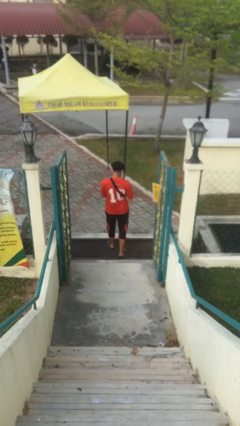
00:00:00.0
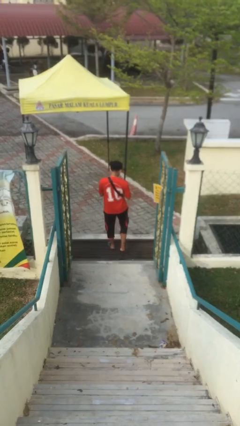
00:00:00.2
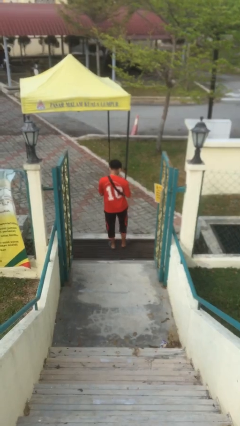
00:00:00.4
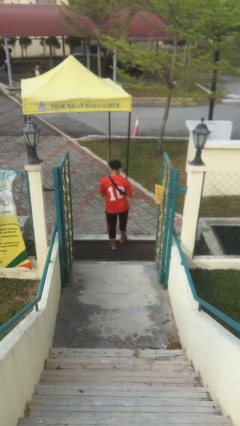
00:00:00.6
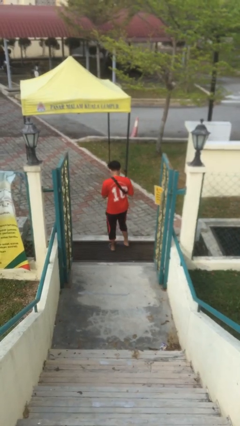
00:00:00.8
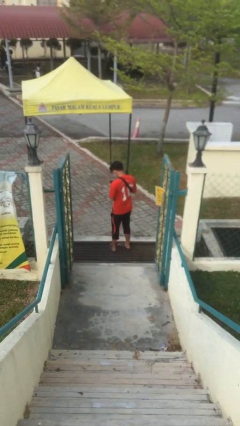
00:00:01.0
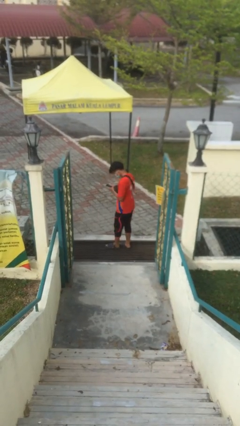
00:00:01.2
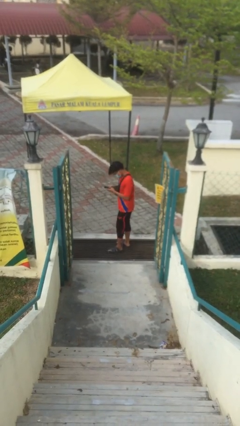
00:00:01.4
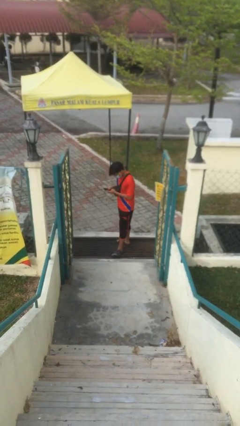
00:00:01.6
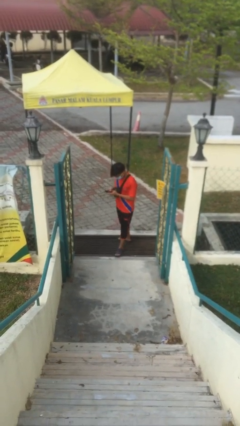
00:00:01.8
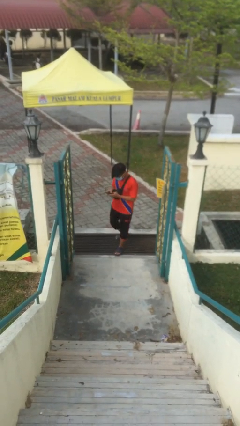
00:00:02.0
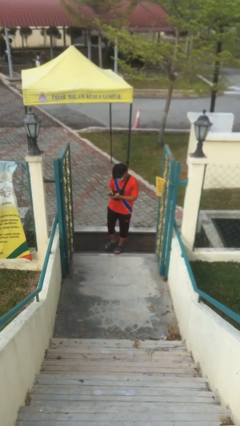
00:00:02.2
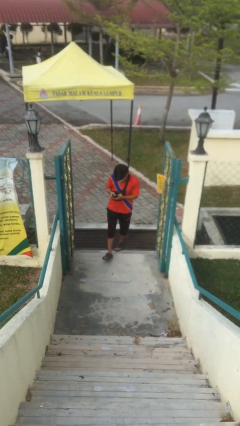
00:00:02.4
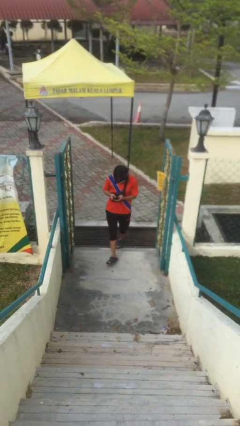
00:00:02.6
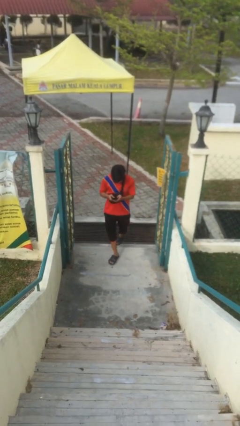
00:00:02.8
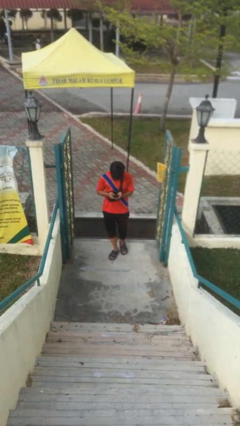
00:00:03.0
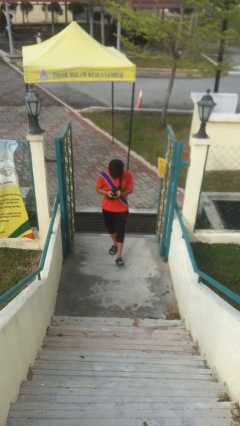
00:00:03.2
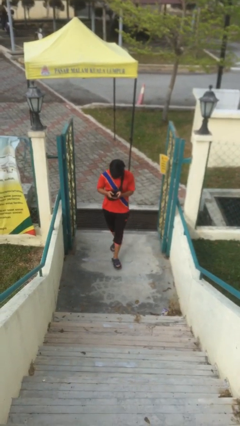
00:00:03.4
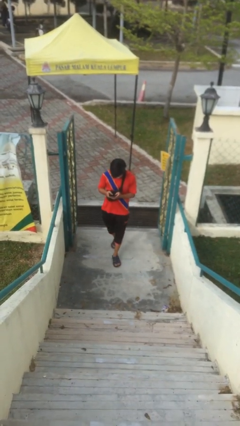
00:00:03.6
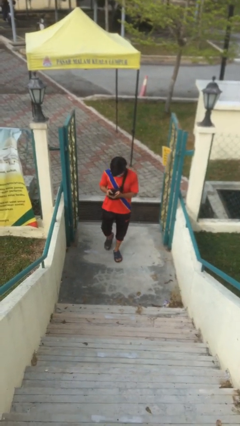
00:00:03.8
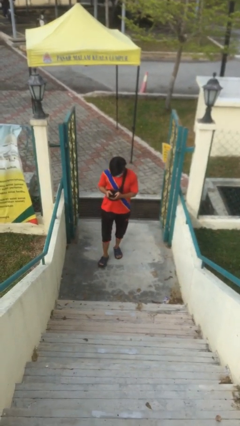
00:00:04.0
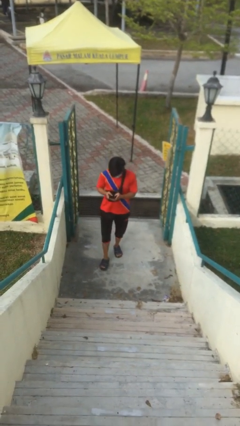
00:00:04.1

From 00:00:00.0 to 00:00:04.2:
person enters scene through structure

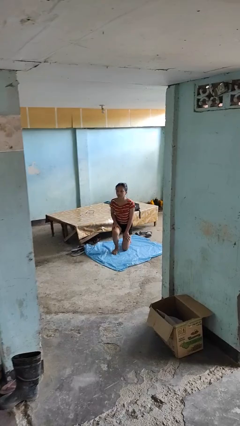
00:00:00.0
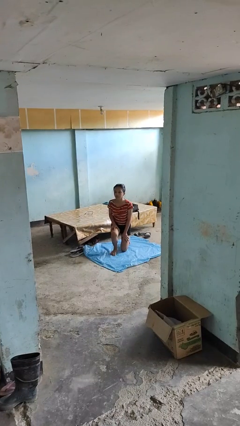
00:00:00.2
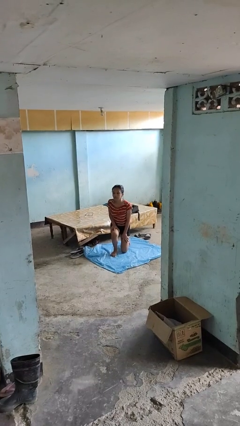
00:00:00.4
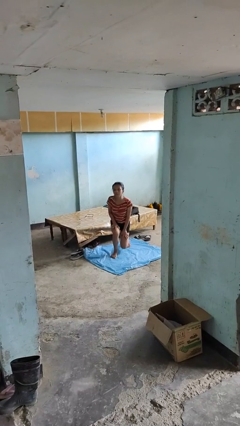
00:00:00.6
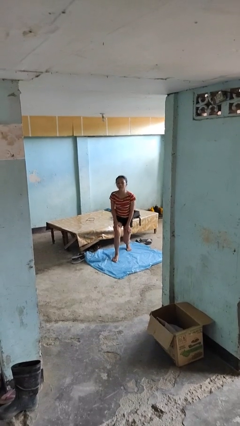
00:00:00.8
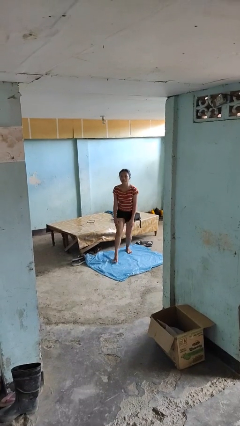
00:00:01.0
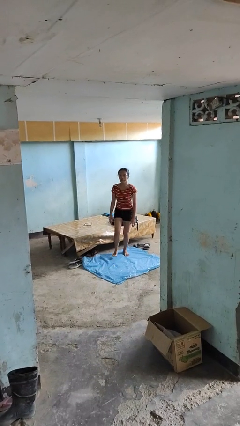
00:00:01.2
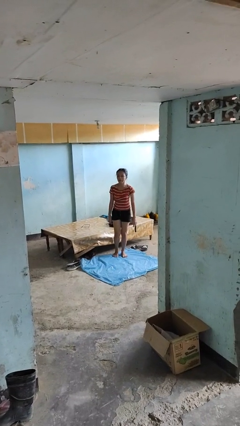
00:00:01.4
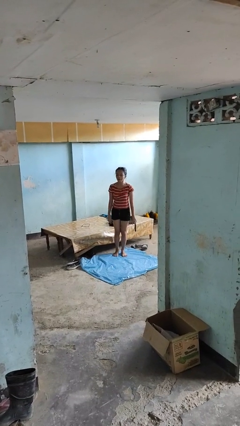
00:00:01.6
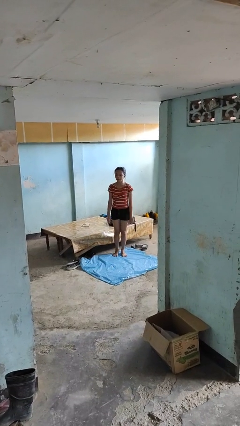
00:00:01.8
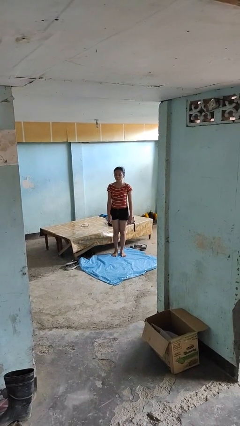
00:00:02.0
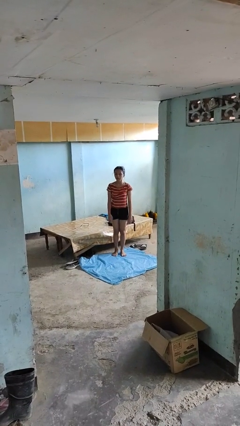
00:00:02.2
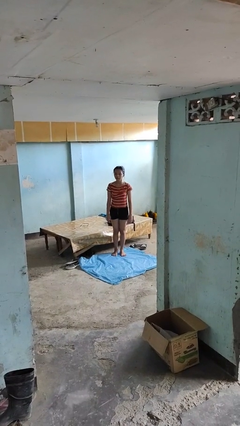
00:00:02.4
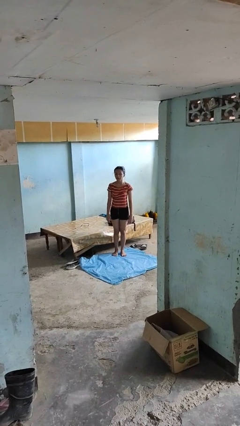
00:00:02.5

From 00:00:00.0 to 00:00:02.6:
person stands up from floor

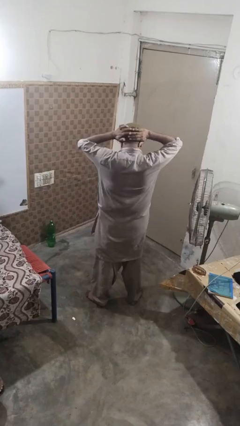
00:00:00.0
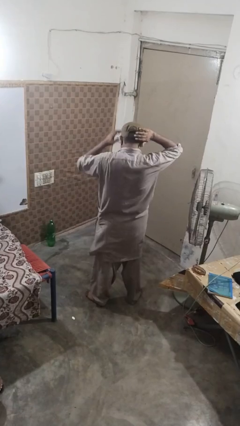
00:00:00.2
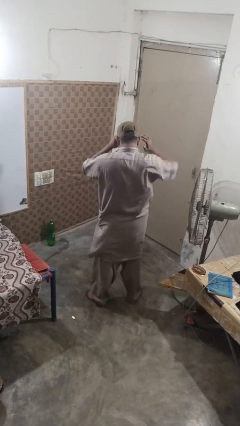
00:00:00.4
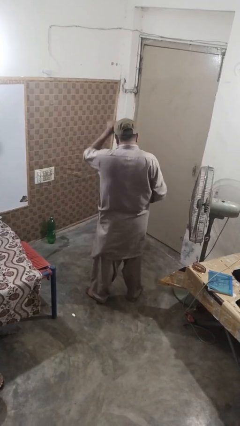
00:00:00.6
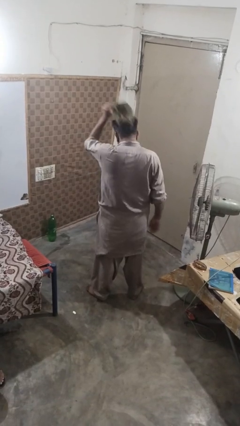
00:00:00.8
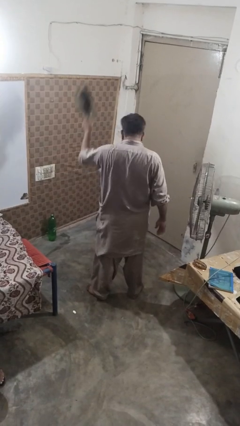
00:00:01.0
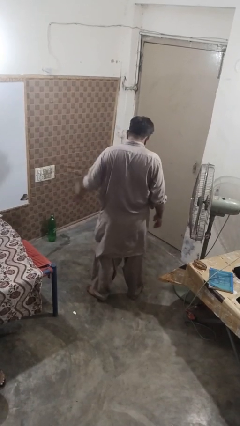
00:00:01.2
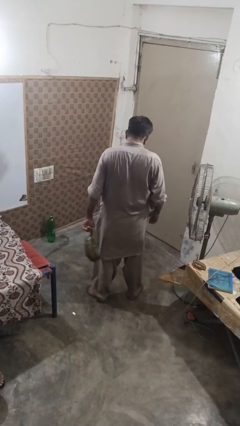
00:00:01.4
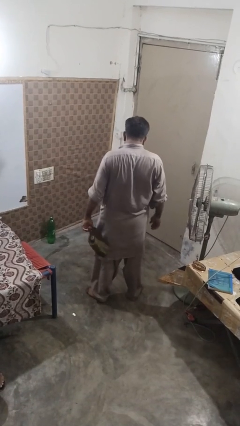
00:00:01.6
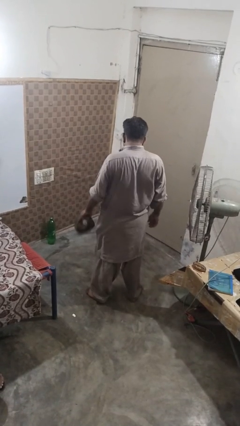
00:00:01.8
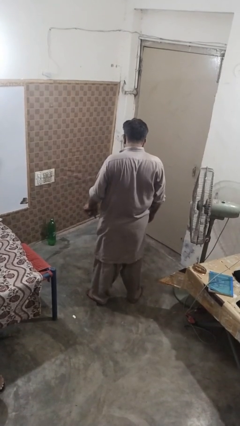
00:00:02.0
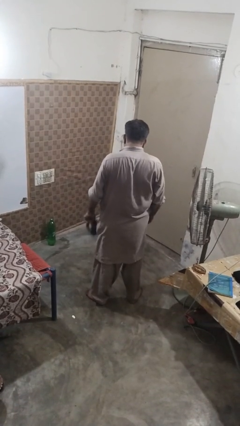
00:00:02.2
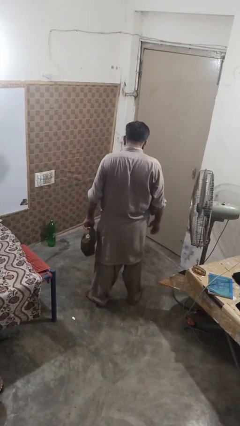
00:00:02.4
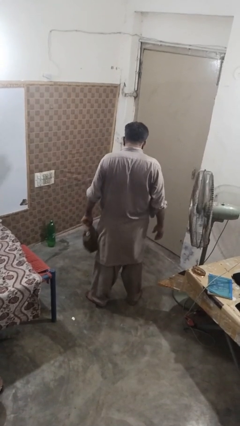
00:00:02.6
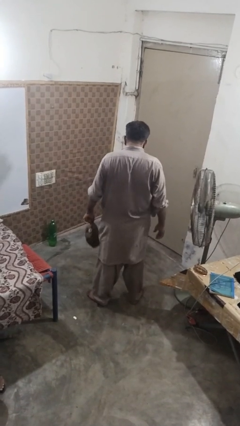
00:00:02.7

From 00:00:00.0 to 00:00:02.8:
person takes off hat

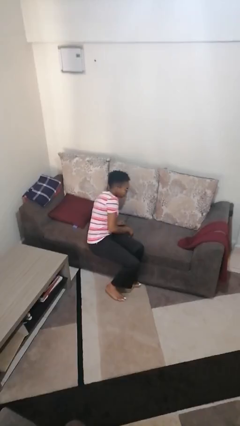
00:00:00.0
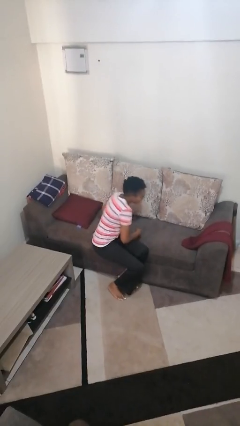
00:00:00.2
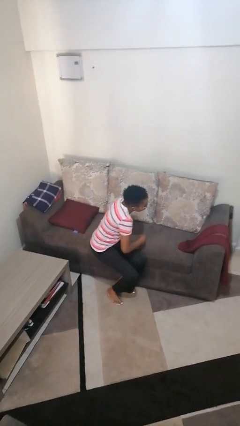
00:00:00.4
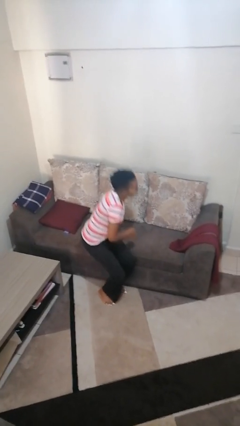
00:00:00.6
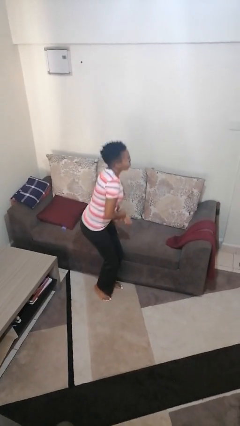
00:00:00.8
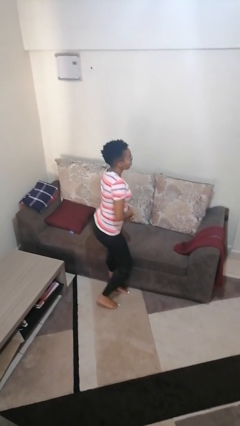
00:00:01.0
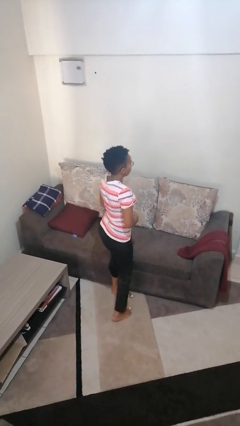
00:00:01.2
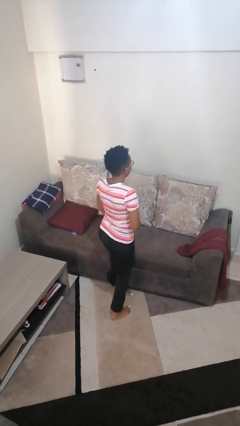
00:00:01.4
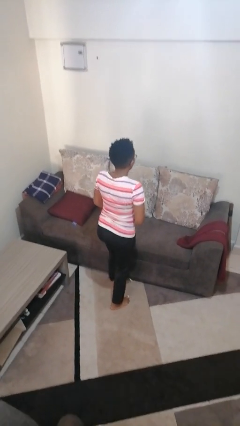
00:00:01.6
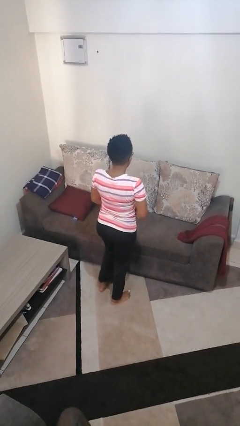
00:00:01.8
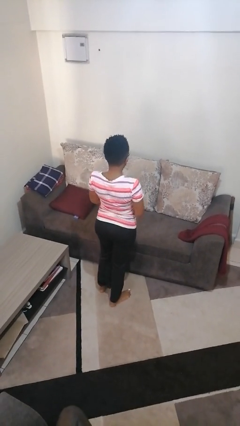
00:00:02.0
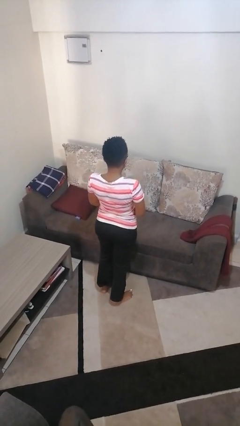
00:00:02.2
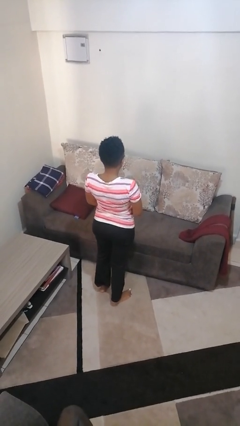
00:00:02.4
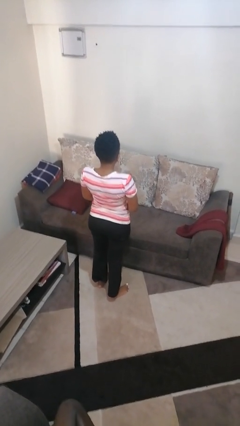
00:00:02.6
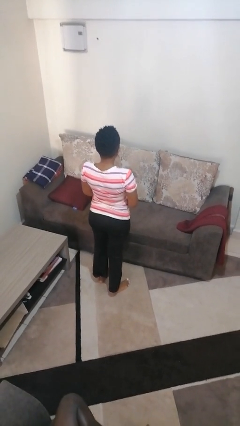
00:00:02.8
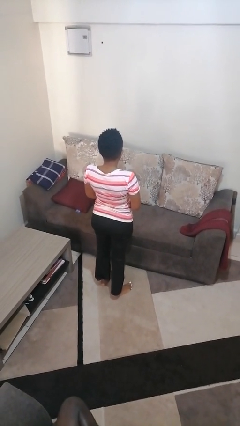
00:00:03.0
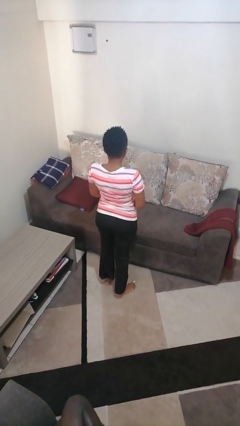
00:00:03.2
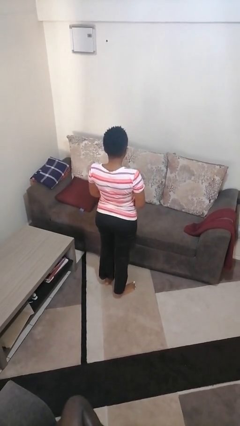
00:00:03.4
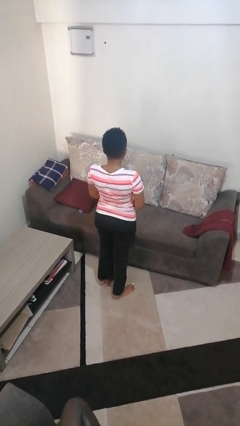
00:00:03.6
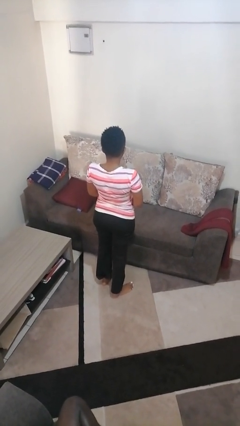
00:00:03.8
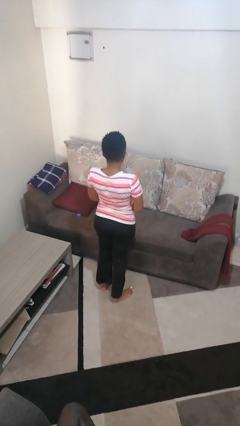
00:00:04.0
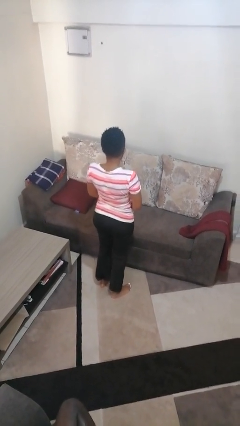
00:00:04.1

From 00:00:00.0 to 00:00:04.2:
person stands up

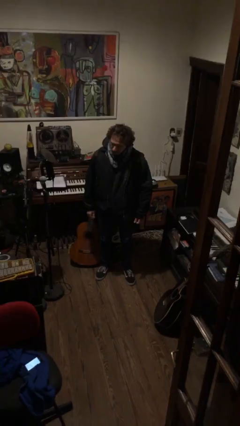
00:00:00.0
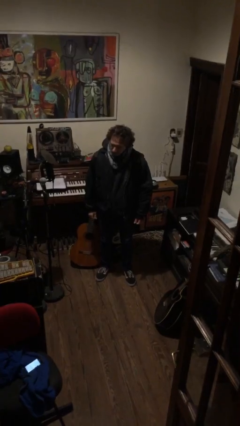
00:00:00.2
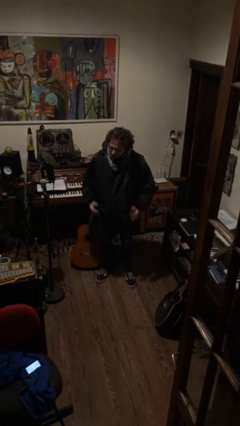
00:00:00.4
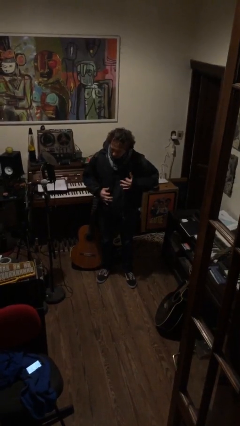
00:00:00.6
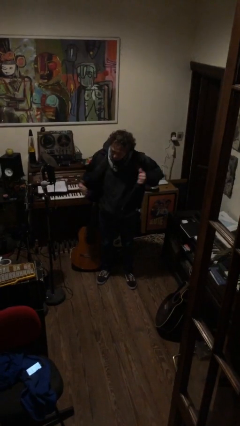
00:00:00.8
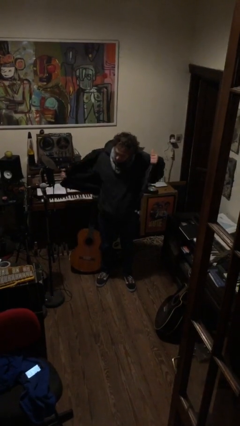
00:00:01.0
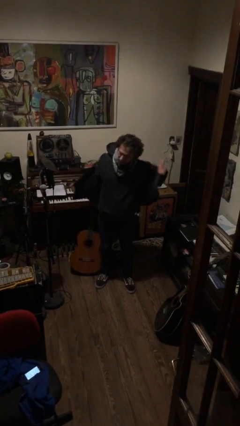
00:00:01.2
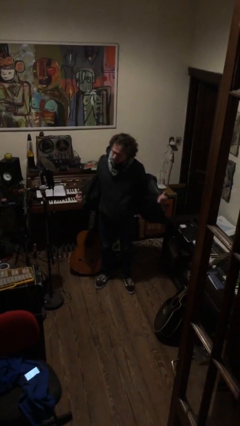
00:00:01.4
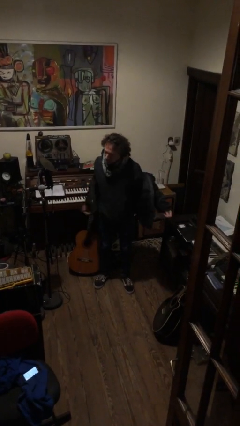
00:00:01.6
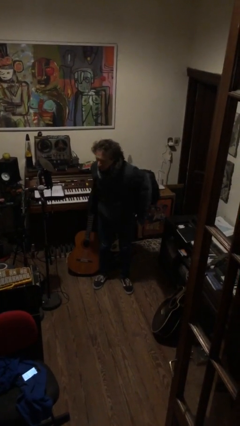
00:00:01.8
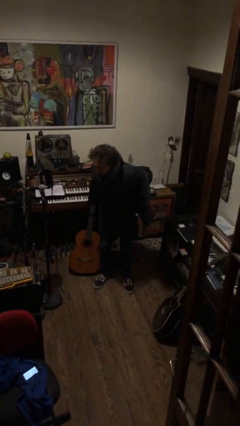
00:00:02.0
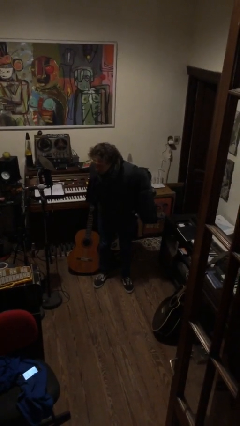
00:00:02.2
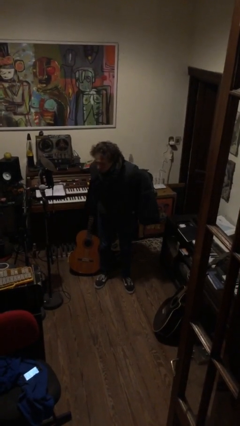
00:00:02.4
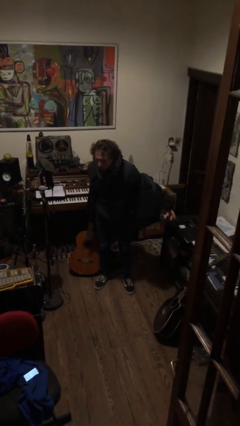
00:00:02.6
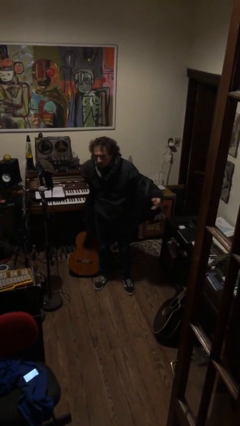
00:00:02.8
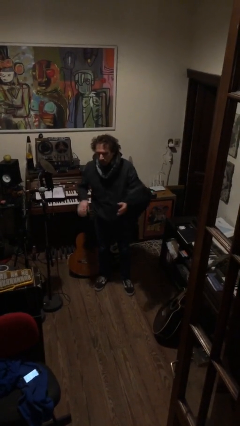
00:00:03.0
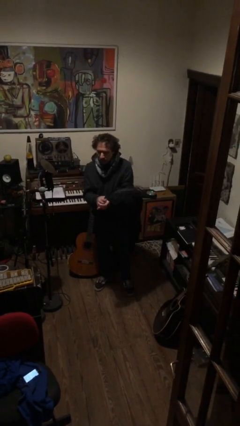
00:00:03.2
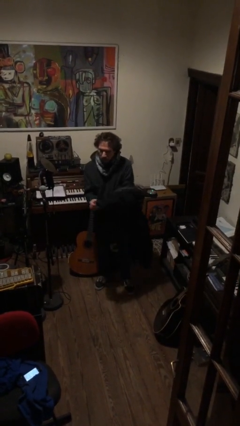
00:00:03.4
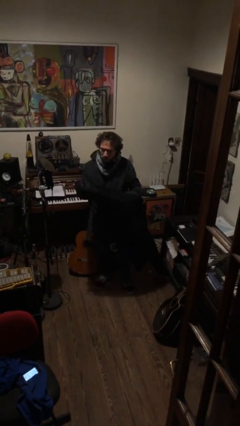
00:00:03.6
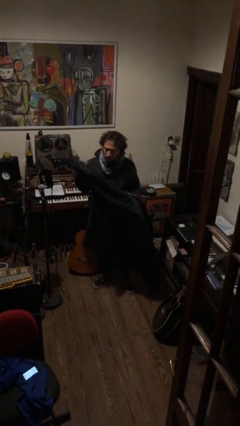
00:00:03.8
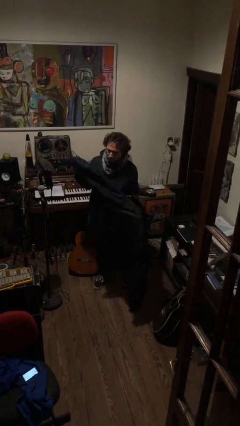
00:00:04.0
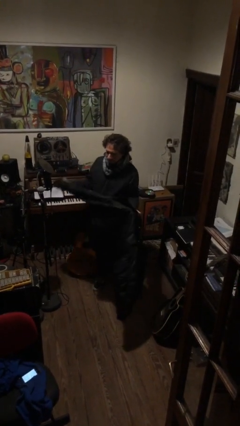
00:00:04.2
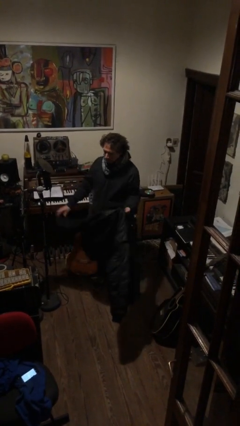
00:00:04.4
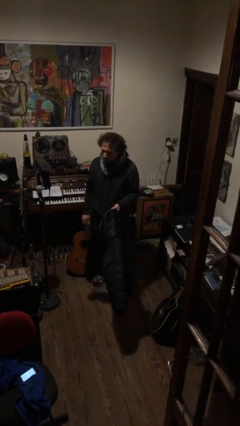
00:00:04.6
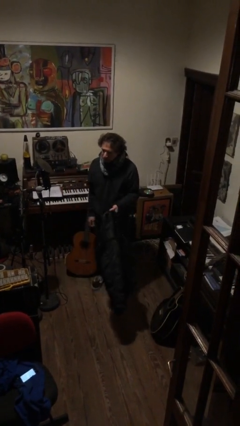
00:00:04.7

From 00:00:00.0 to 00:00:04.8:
person takes off jacket
